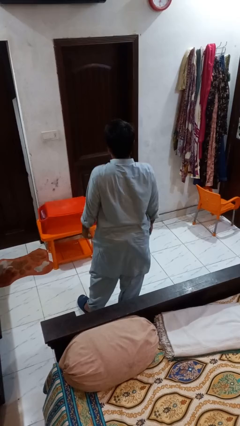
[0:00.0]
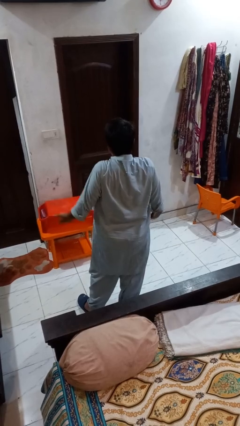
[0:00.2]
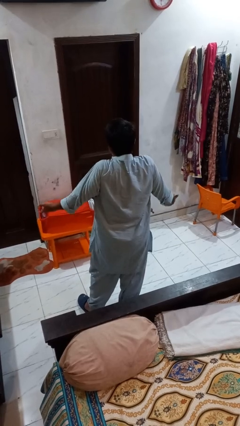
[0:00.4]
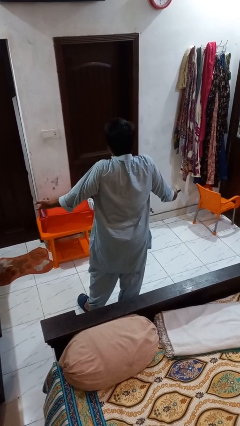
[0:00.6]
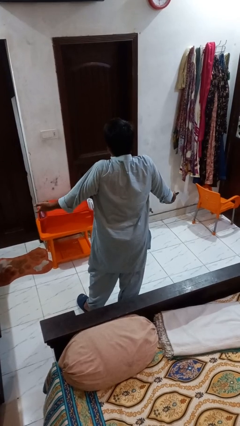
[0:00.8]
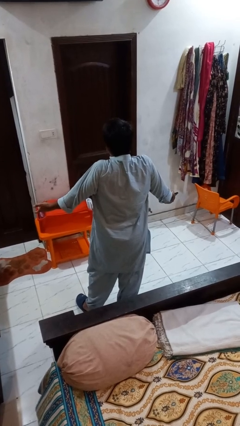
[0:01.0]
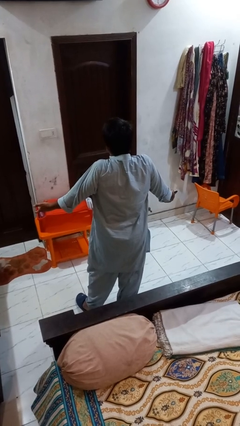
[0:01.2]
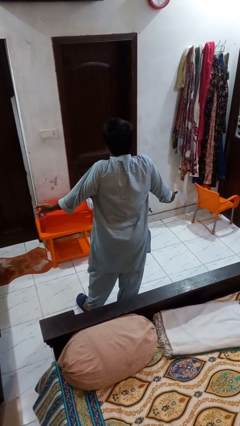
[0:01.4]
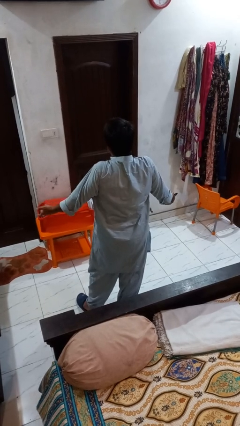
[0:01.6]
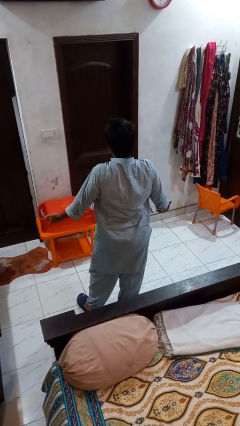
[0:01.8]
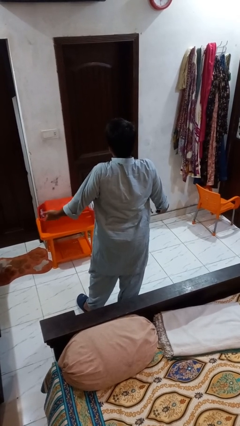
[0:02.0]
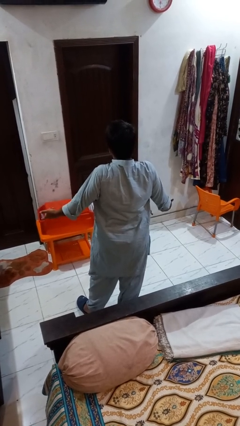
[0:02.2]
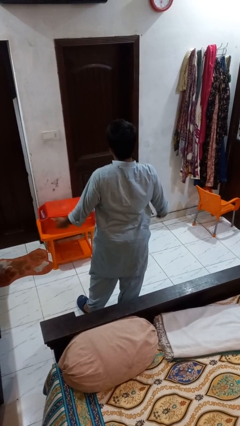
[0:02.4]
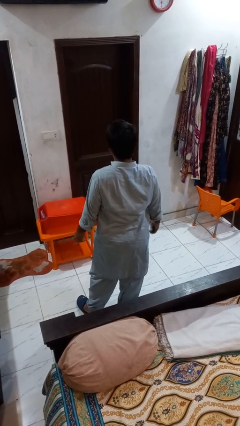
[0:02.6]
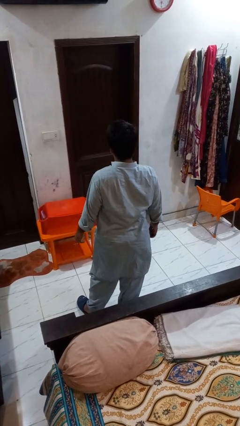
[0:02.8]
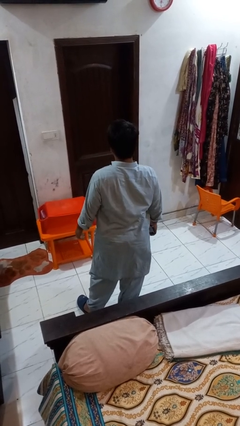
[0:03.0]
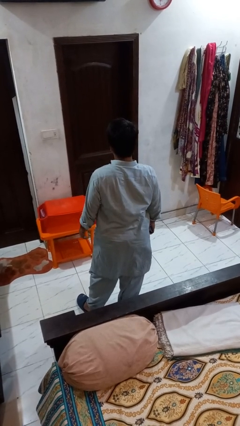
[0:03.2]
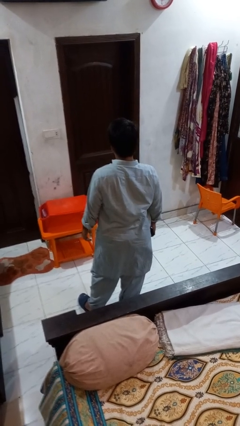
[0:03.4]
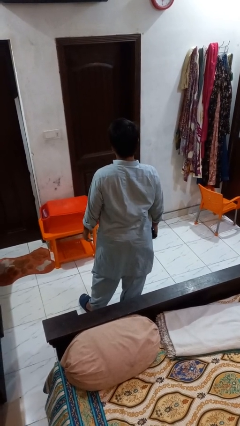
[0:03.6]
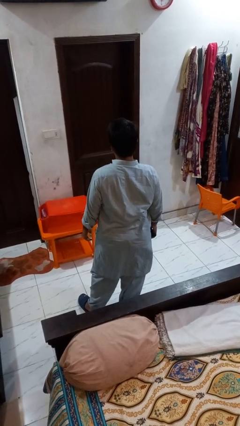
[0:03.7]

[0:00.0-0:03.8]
person shrugs

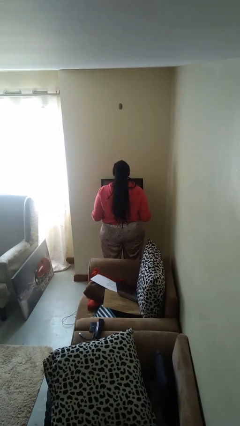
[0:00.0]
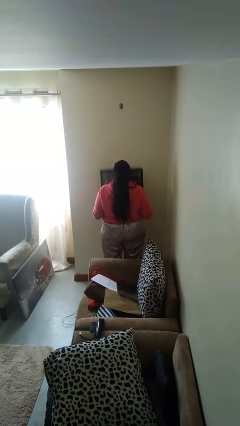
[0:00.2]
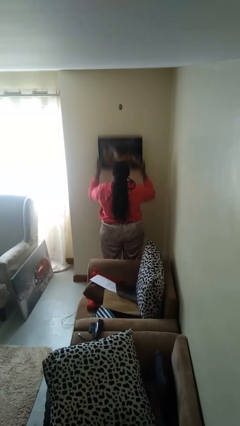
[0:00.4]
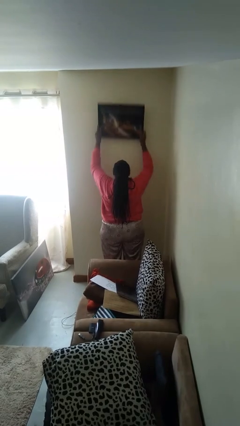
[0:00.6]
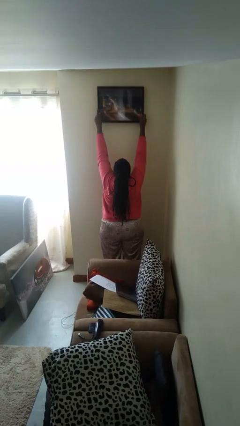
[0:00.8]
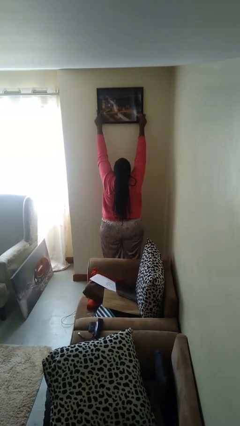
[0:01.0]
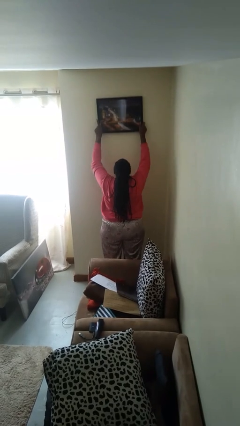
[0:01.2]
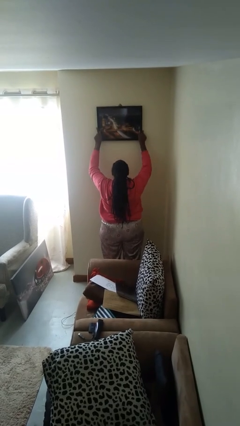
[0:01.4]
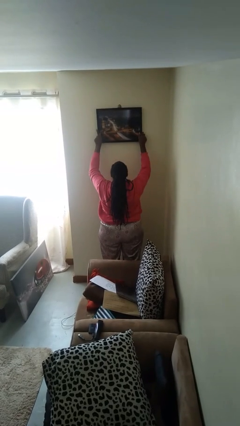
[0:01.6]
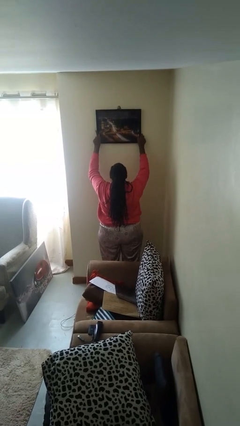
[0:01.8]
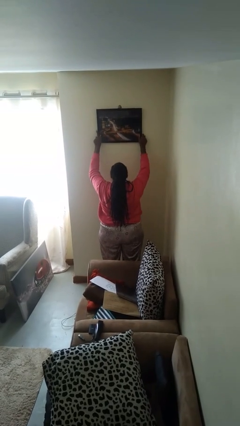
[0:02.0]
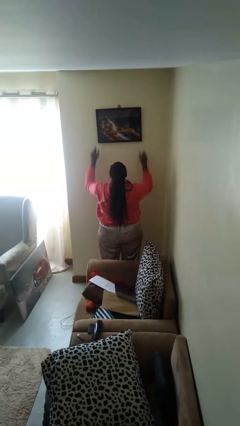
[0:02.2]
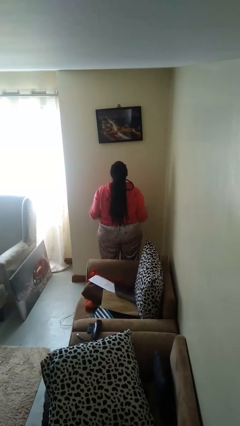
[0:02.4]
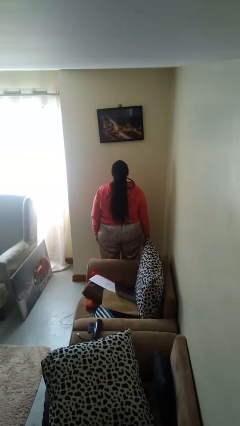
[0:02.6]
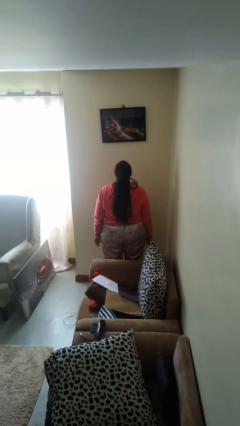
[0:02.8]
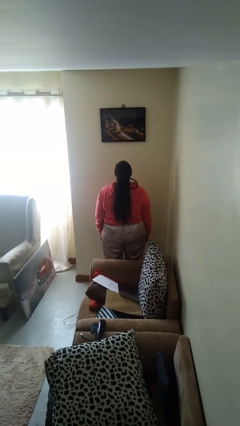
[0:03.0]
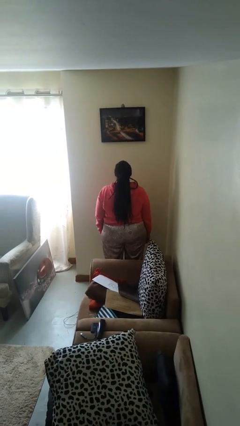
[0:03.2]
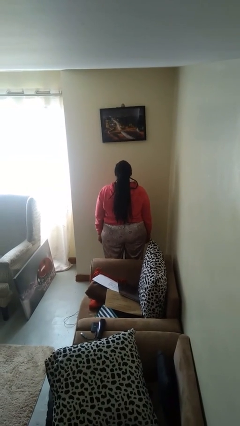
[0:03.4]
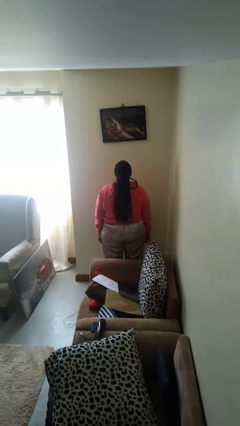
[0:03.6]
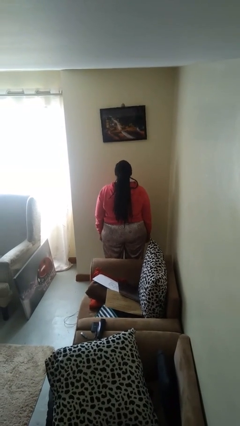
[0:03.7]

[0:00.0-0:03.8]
person puts up picture frame

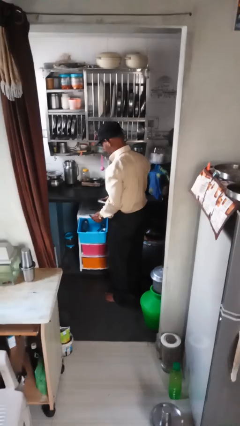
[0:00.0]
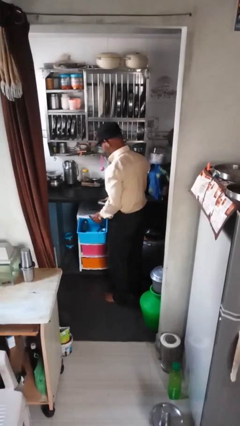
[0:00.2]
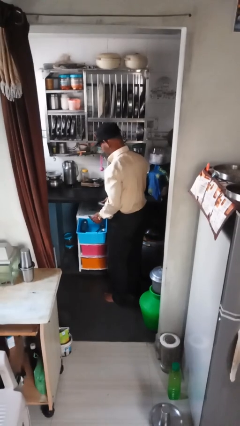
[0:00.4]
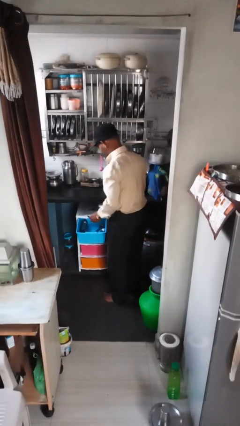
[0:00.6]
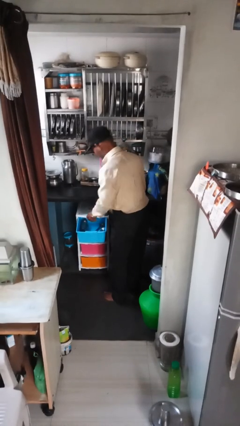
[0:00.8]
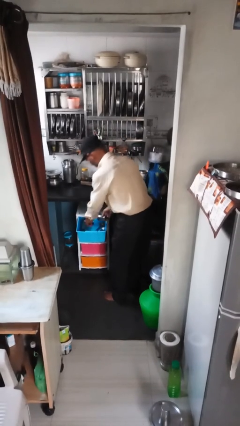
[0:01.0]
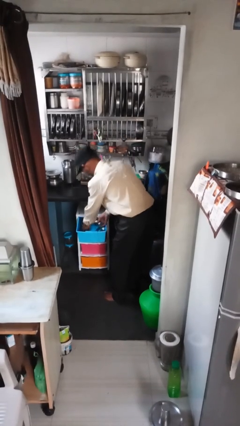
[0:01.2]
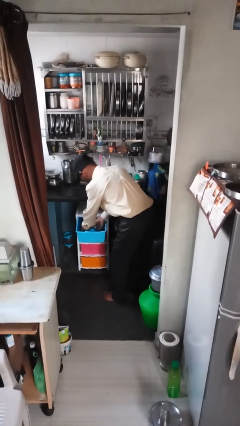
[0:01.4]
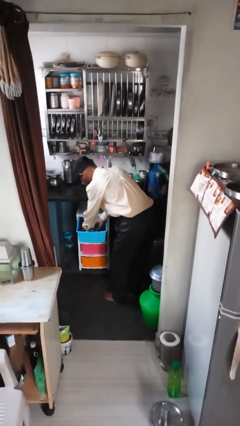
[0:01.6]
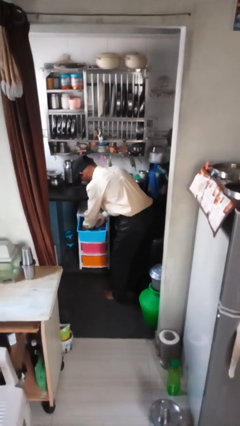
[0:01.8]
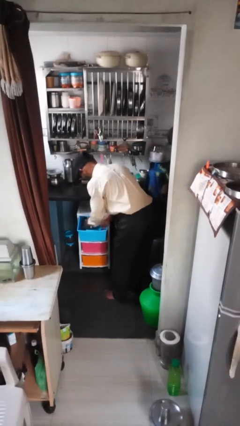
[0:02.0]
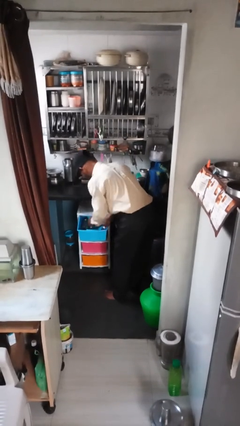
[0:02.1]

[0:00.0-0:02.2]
person puts object into kitchen drawer

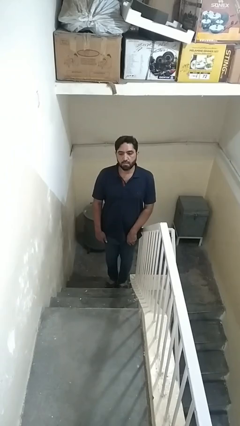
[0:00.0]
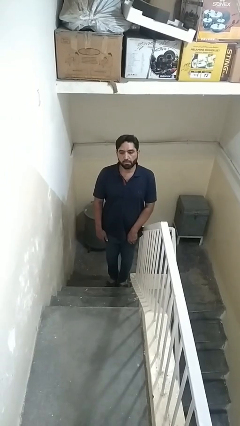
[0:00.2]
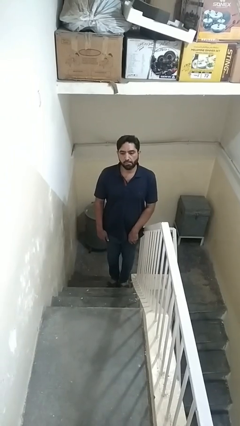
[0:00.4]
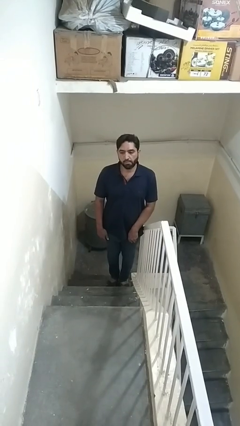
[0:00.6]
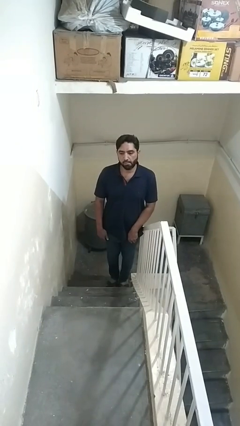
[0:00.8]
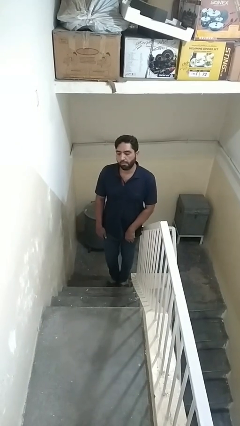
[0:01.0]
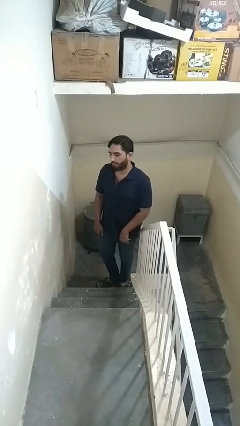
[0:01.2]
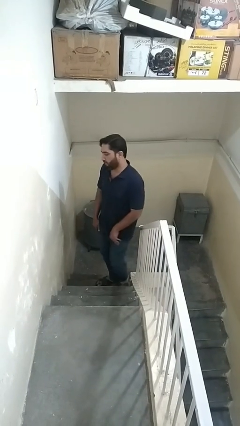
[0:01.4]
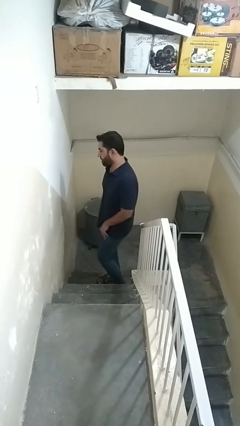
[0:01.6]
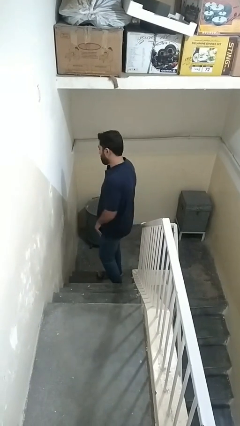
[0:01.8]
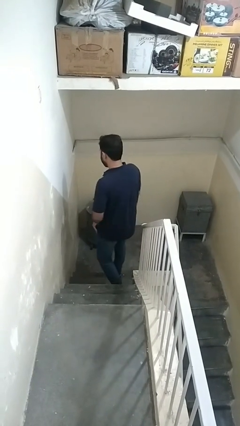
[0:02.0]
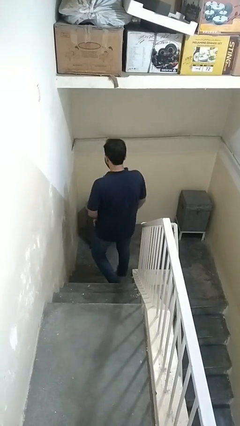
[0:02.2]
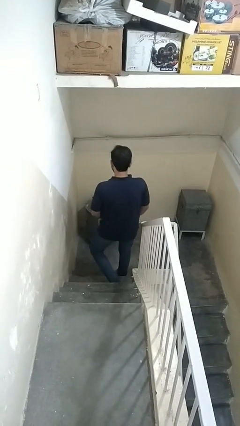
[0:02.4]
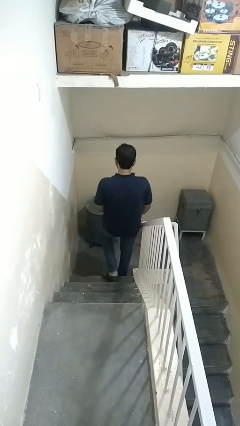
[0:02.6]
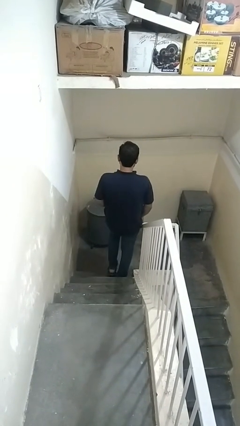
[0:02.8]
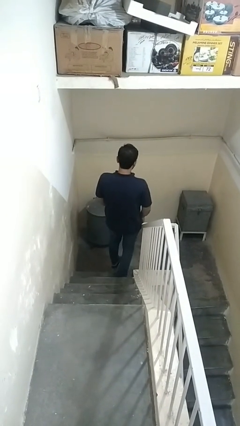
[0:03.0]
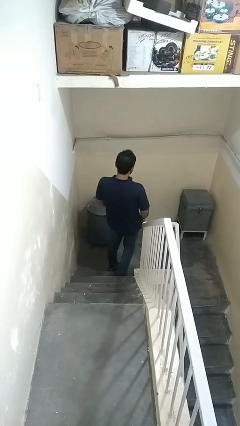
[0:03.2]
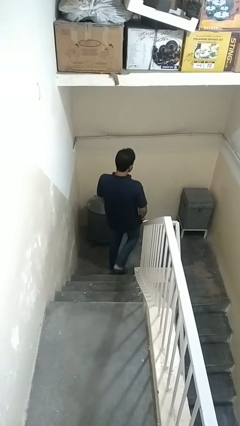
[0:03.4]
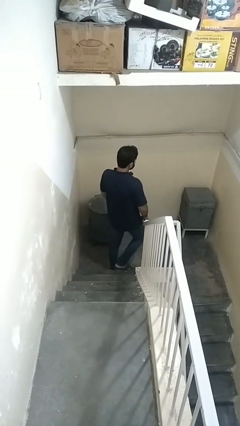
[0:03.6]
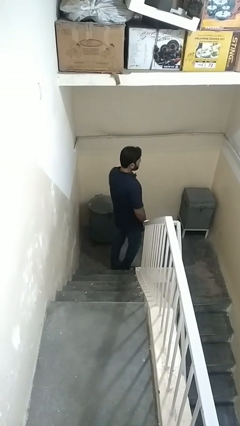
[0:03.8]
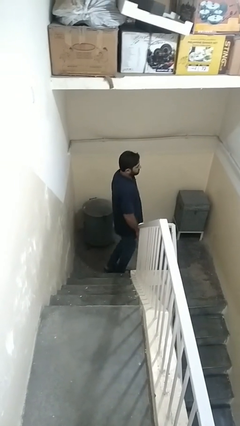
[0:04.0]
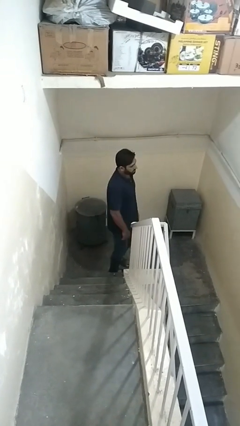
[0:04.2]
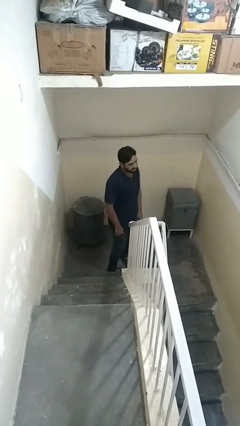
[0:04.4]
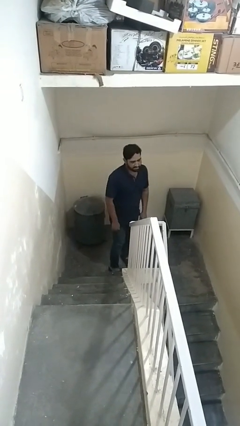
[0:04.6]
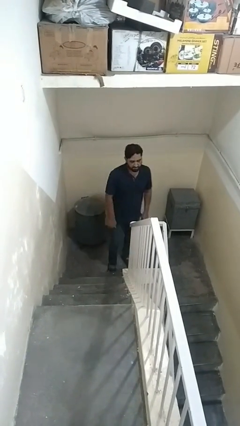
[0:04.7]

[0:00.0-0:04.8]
person climbs down stairs

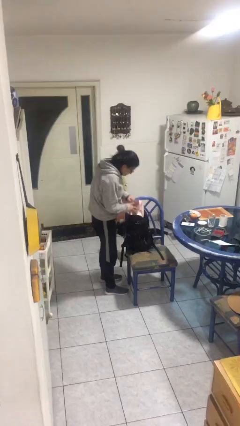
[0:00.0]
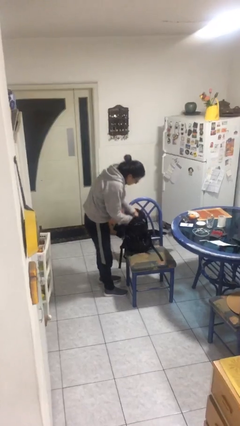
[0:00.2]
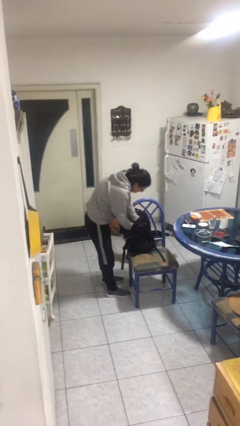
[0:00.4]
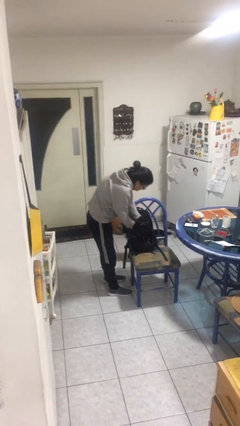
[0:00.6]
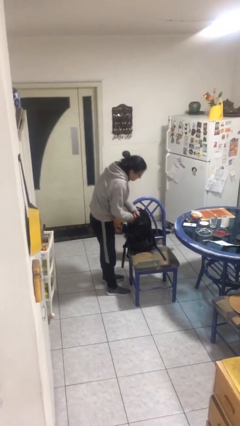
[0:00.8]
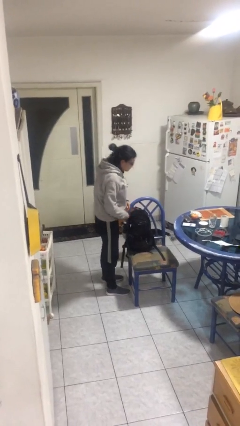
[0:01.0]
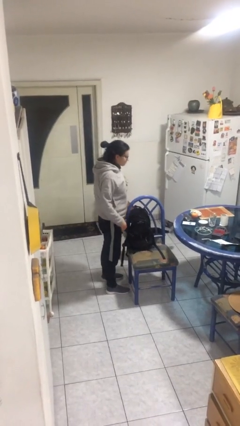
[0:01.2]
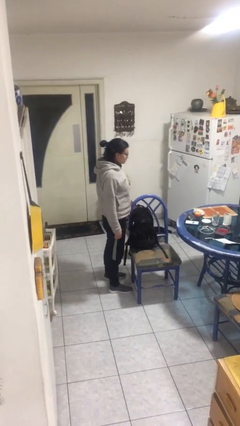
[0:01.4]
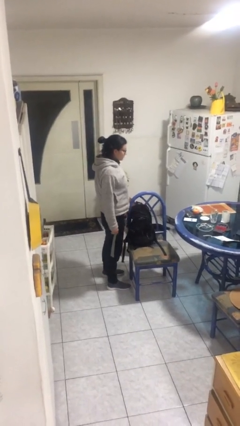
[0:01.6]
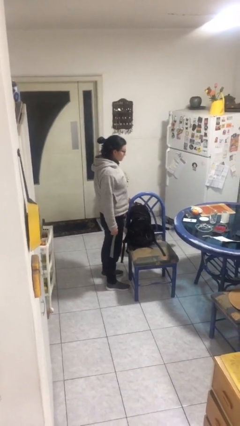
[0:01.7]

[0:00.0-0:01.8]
person puts object into backpack

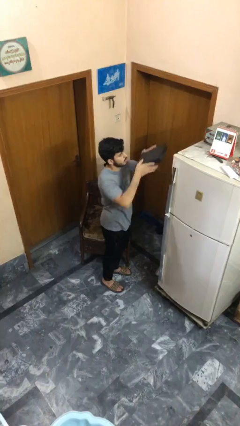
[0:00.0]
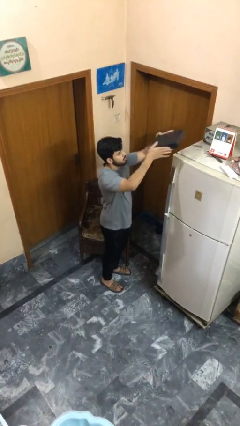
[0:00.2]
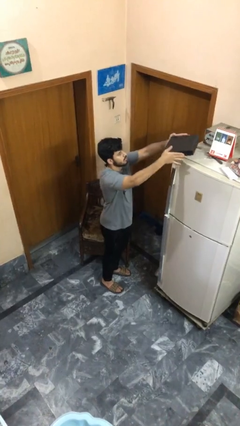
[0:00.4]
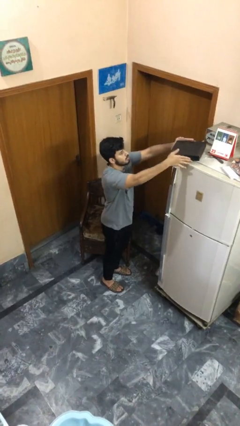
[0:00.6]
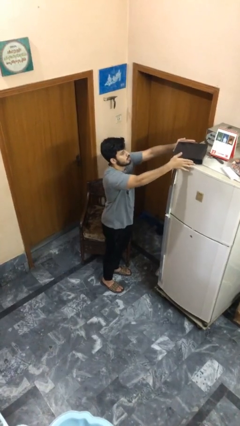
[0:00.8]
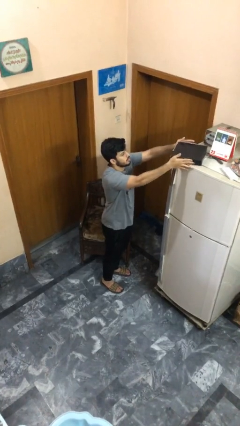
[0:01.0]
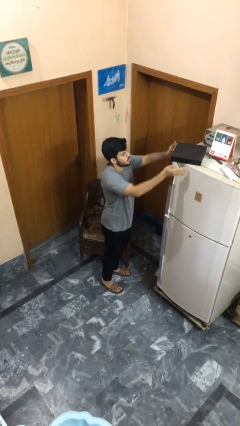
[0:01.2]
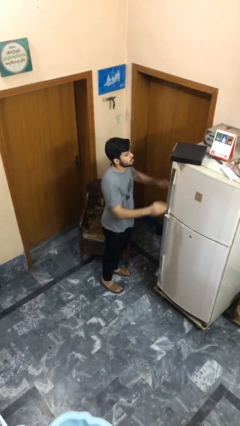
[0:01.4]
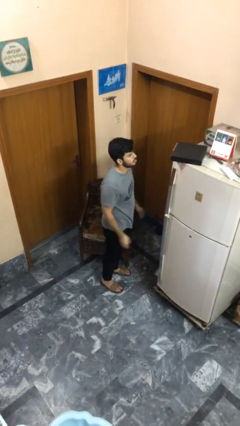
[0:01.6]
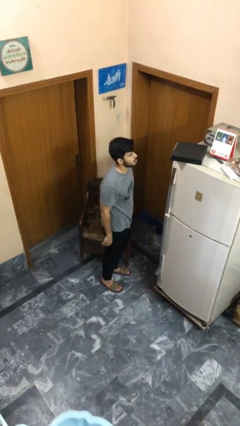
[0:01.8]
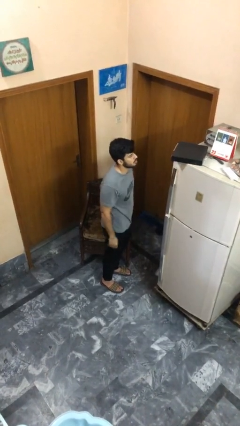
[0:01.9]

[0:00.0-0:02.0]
person puts down object on countertop
